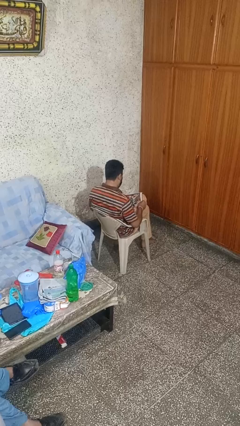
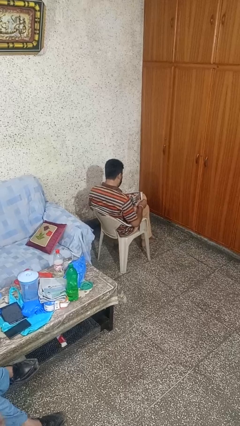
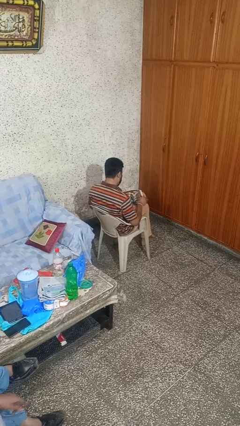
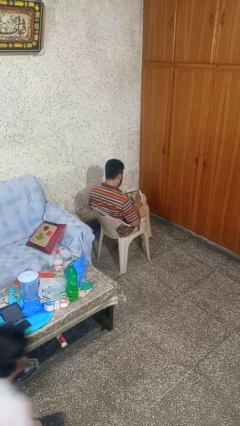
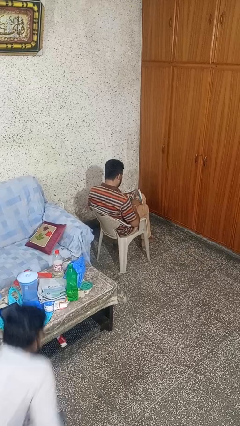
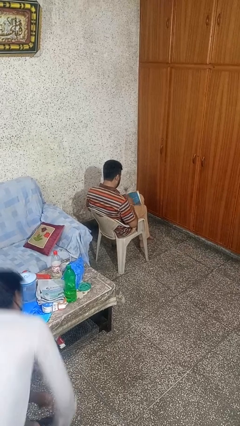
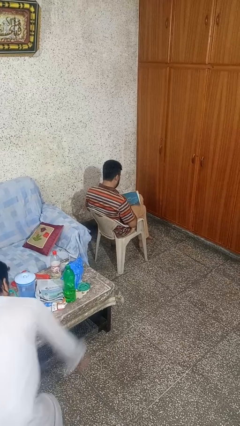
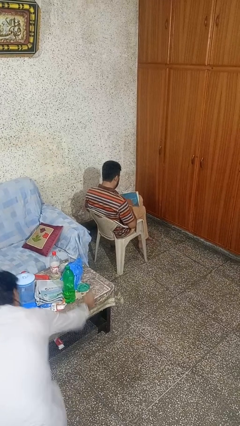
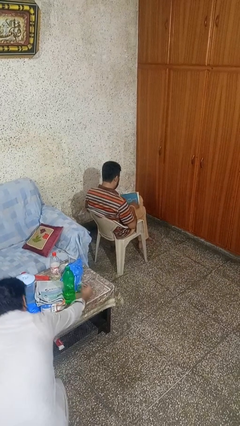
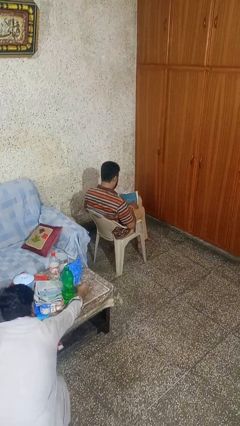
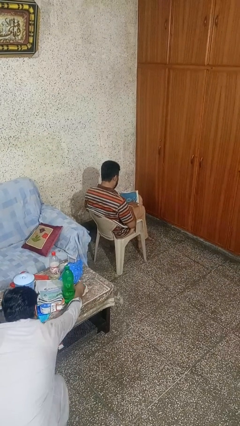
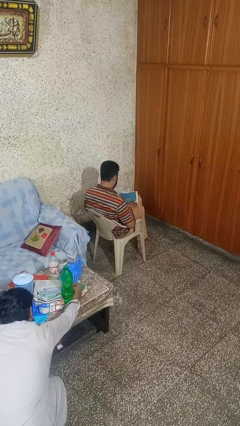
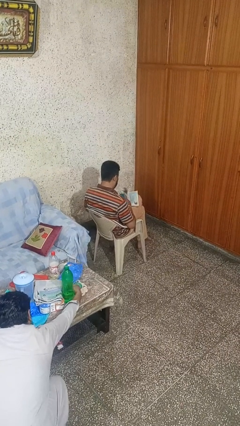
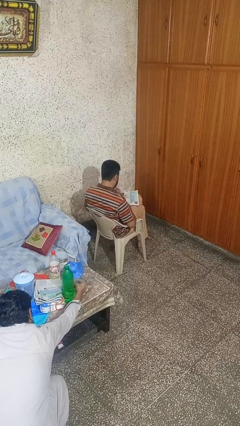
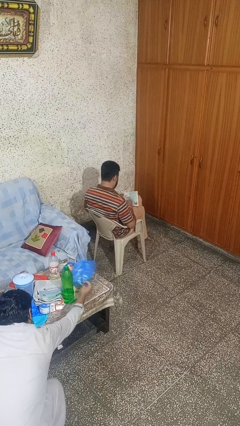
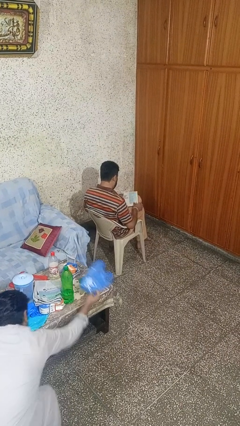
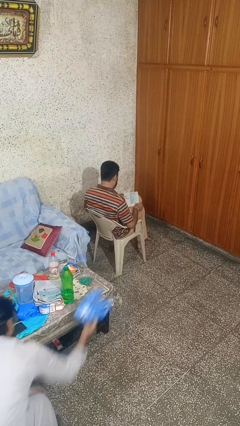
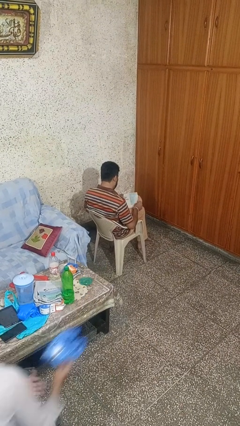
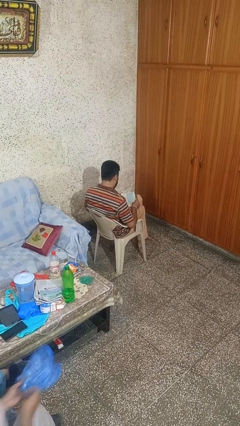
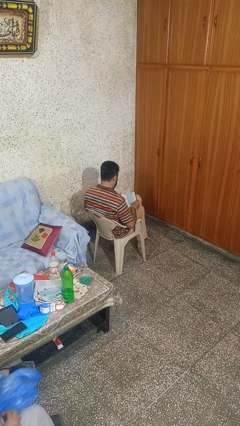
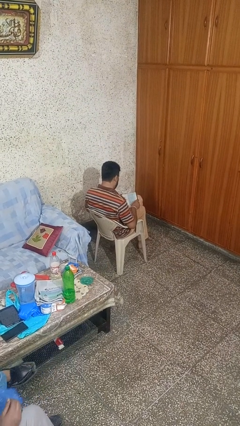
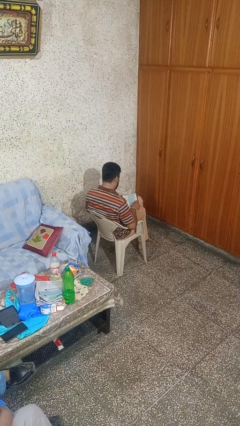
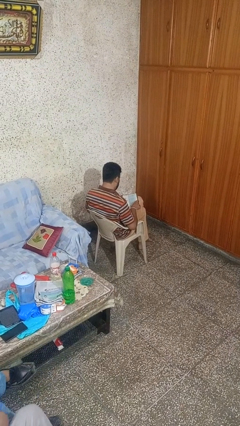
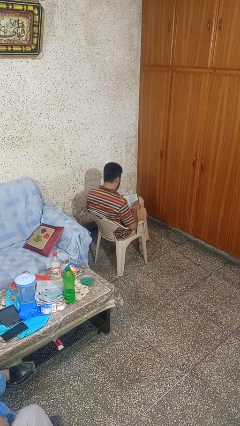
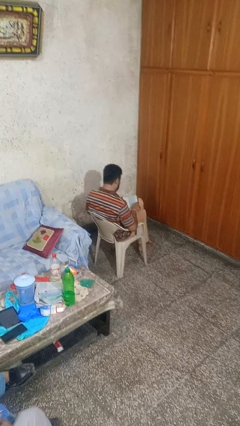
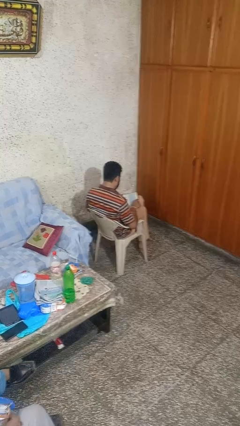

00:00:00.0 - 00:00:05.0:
person reads magazine

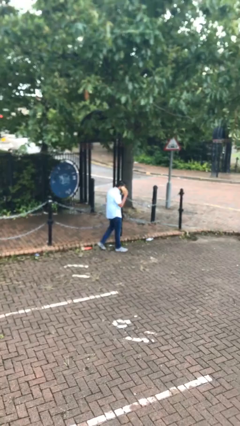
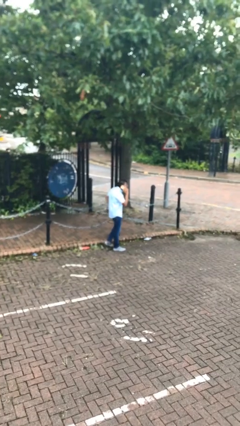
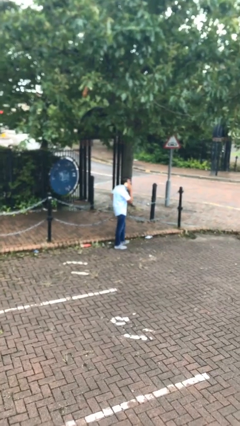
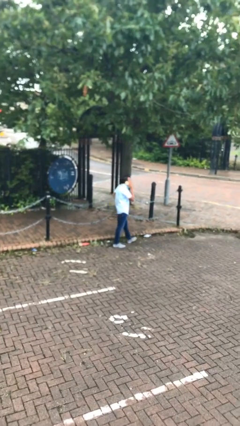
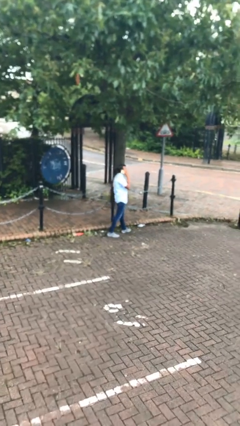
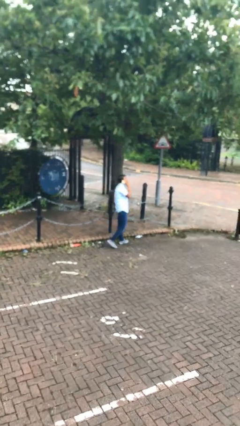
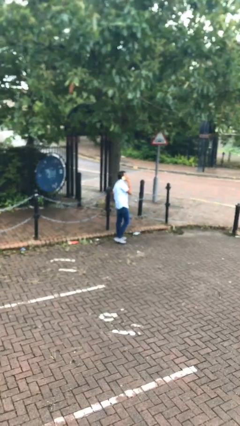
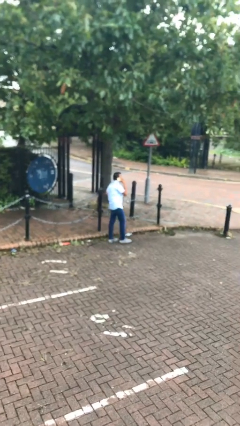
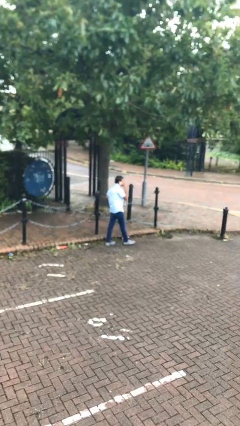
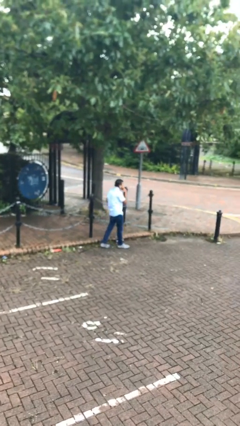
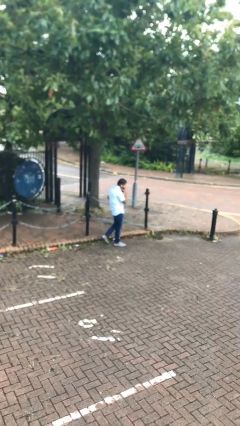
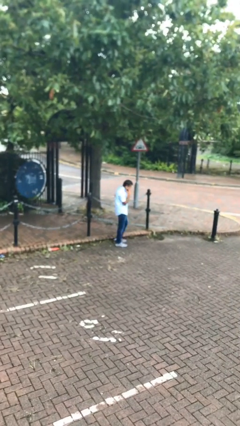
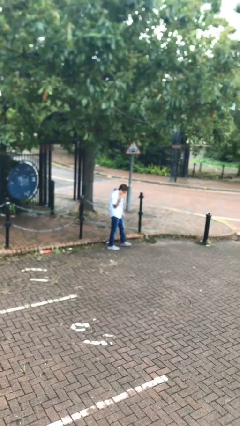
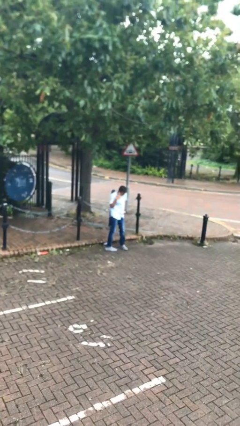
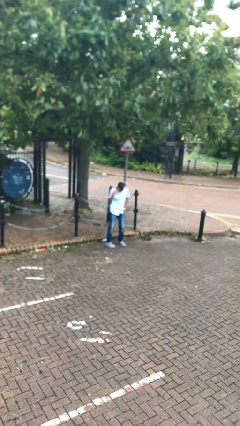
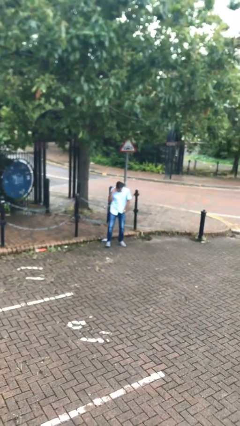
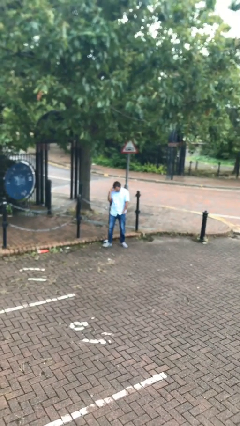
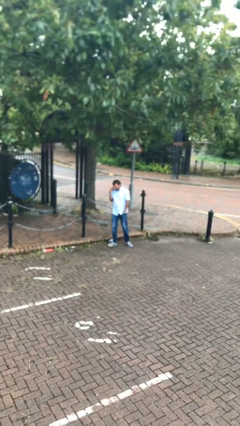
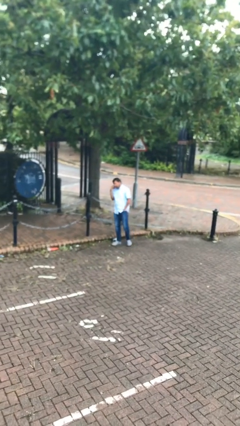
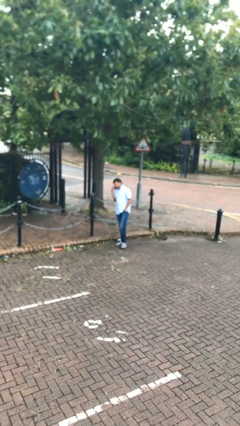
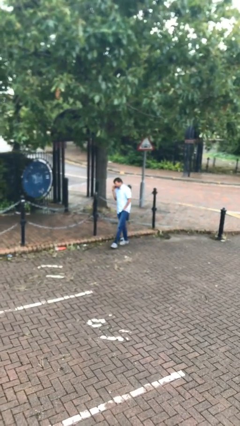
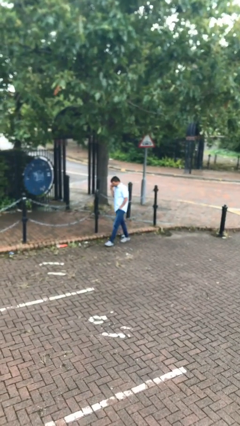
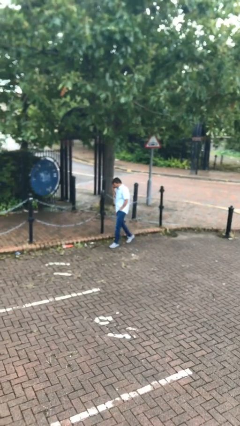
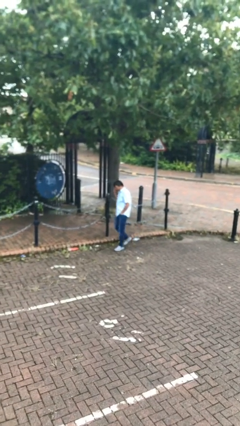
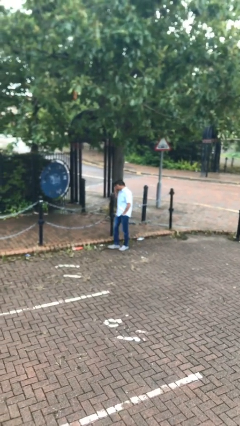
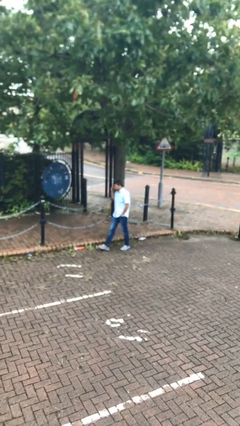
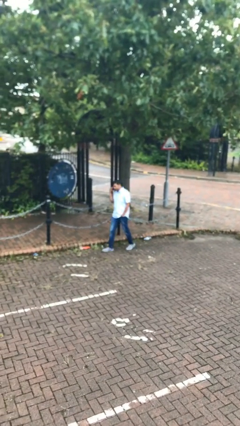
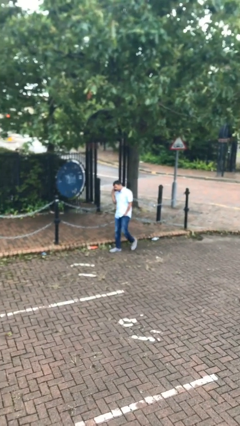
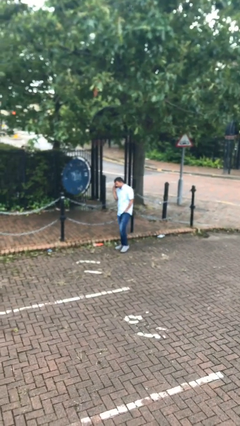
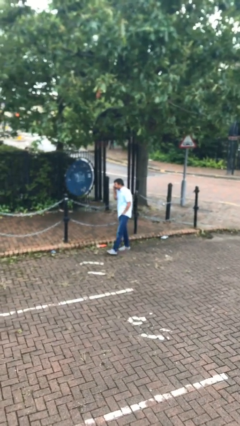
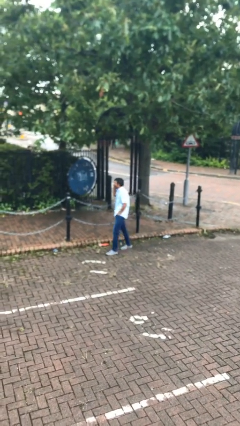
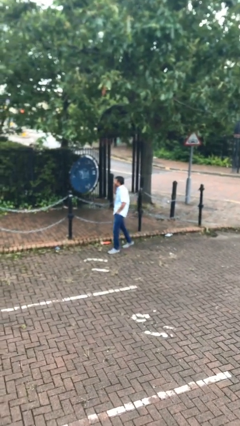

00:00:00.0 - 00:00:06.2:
person talks on phone

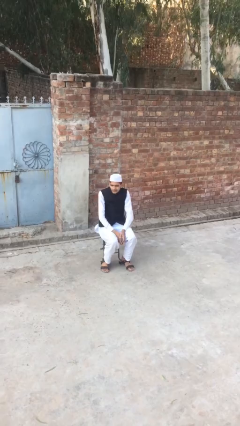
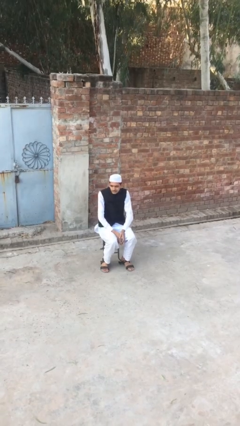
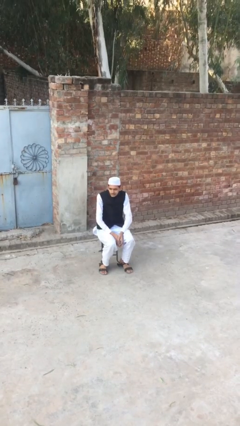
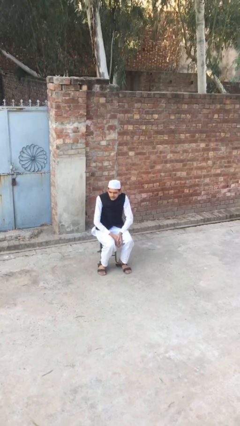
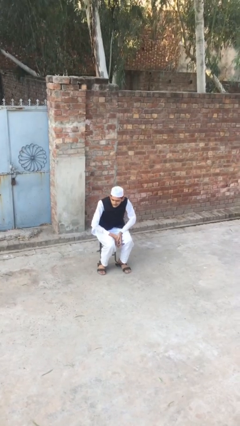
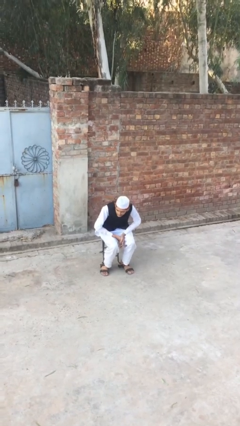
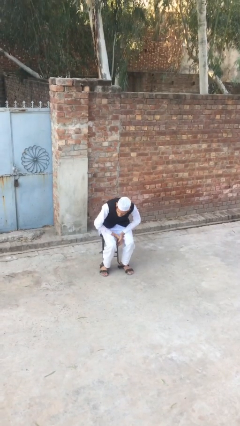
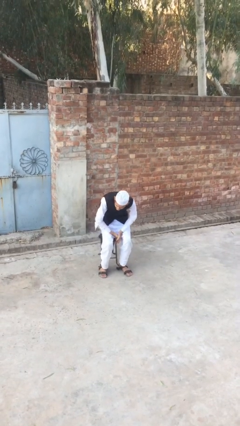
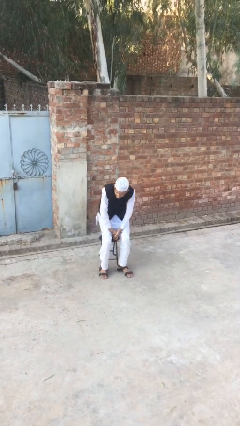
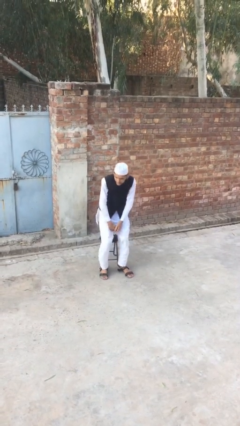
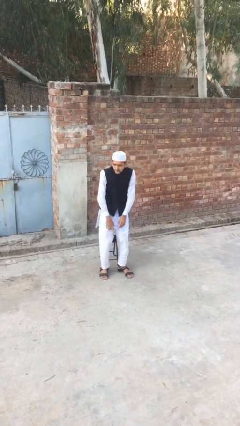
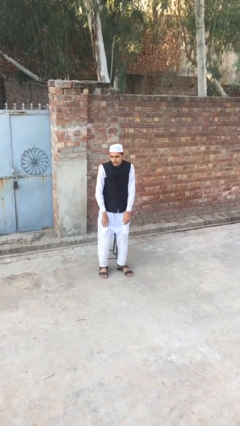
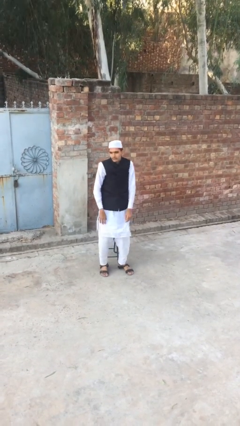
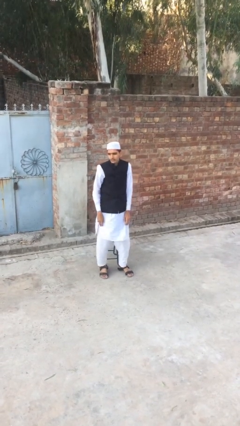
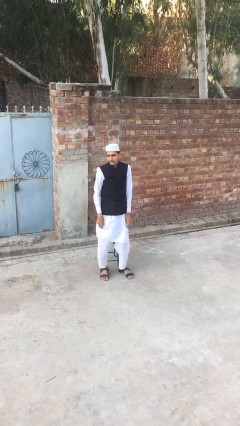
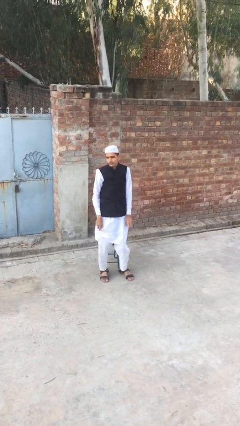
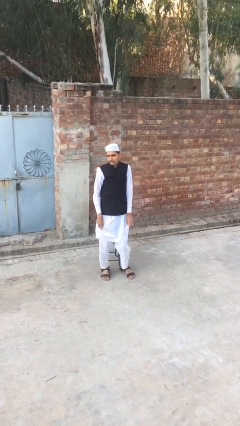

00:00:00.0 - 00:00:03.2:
person stands up

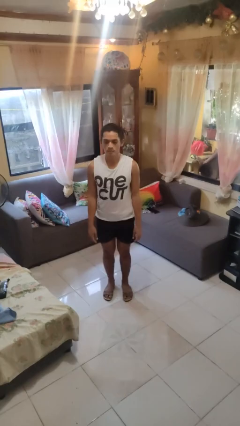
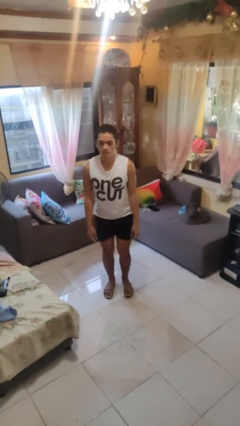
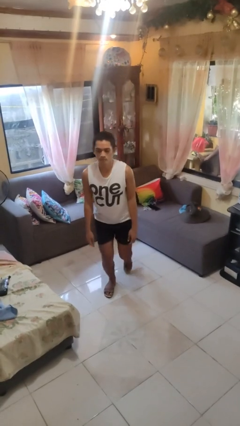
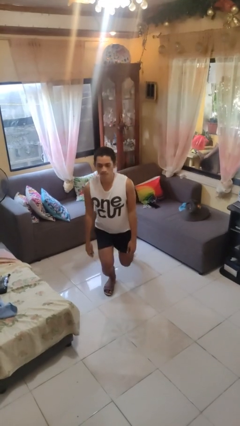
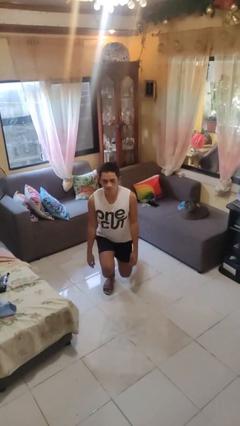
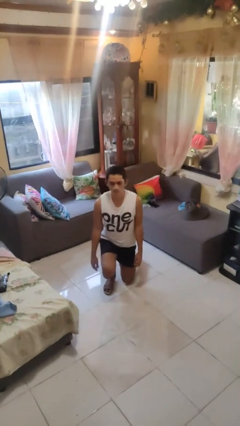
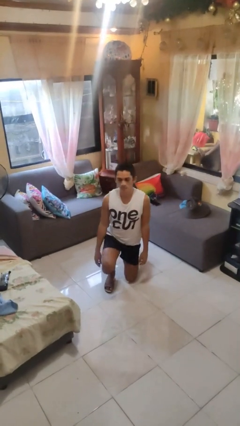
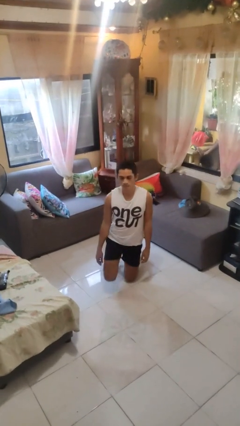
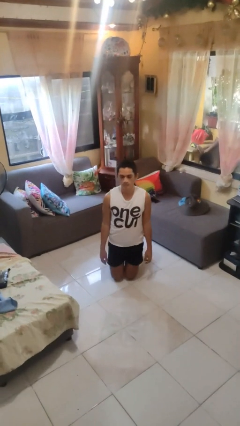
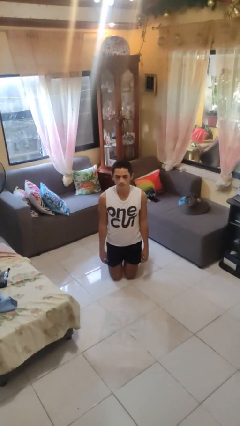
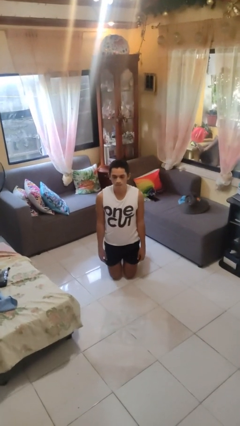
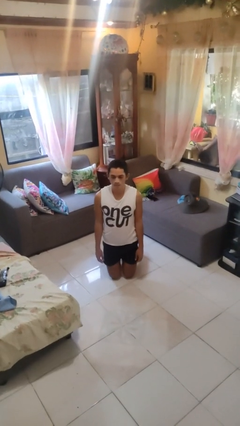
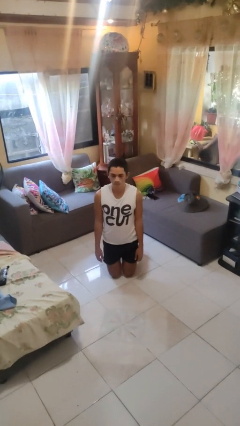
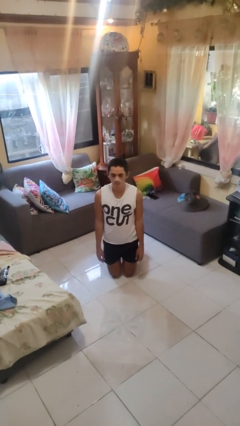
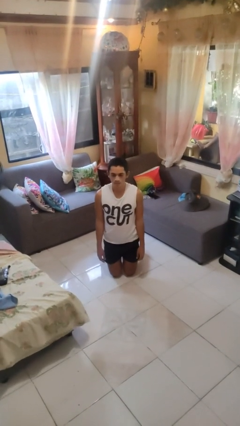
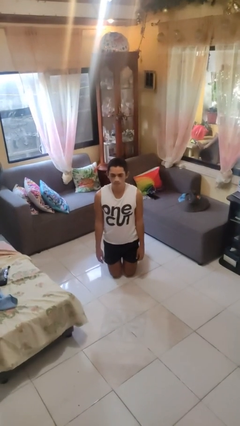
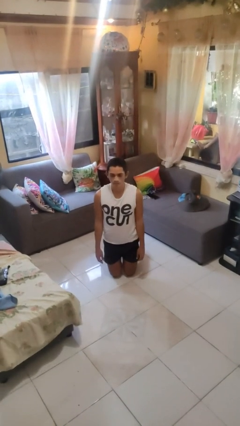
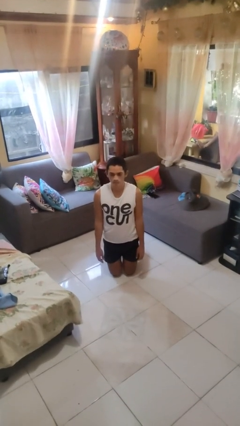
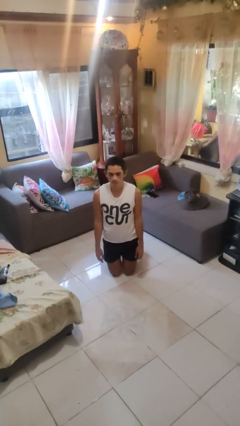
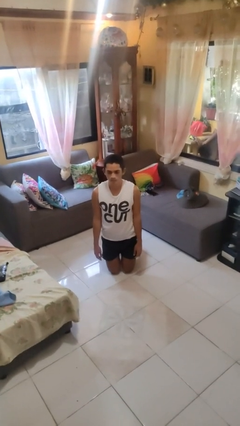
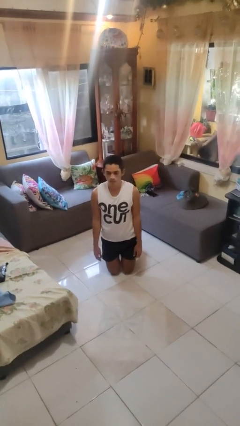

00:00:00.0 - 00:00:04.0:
person kneels
